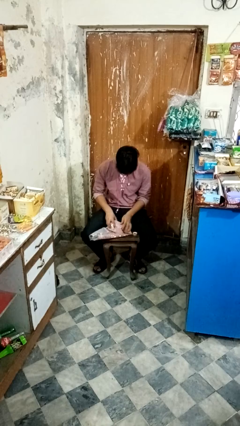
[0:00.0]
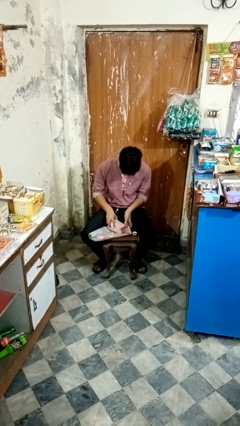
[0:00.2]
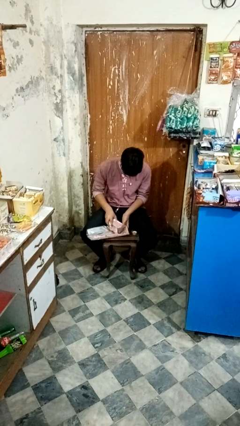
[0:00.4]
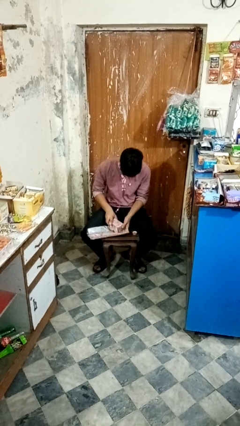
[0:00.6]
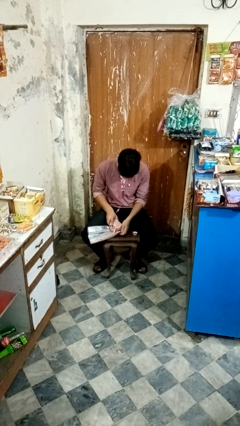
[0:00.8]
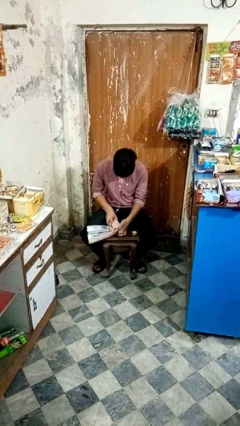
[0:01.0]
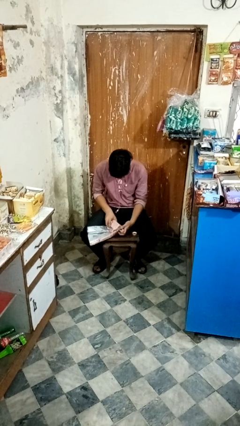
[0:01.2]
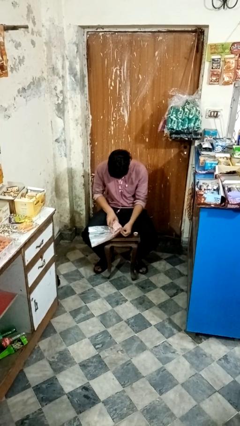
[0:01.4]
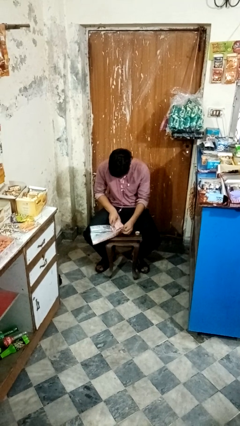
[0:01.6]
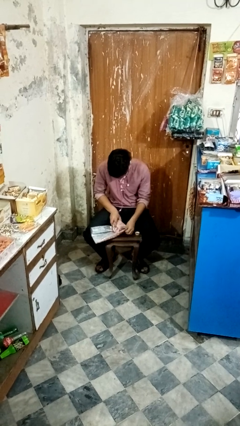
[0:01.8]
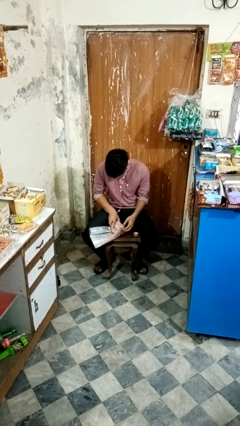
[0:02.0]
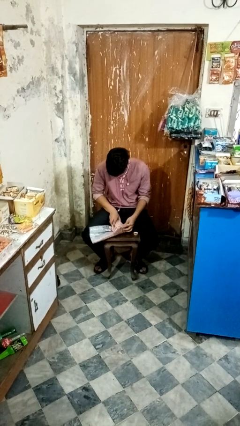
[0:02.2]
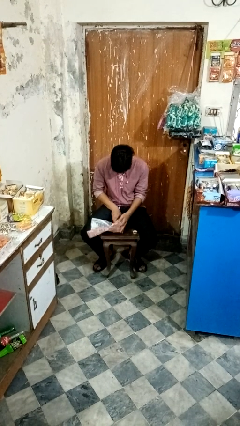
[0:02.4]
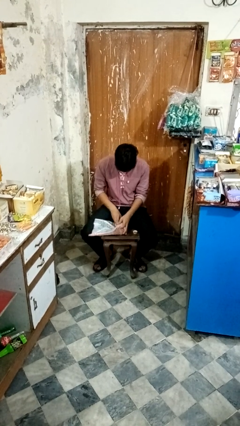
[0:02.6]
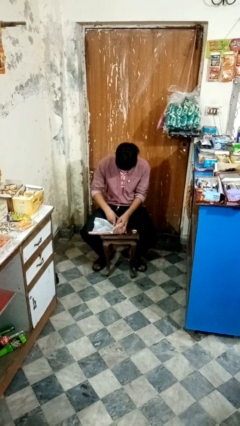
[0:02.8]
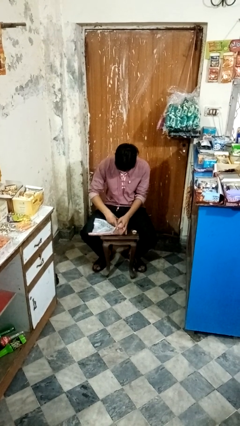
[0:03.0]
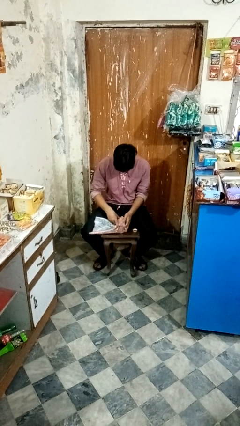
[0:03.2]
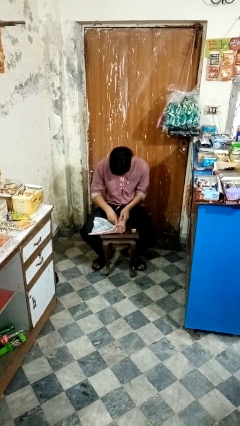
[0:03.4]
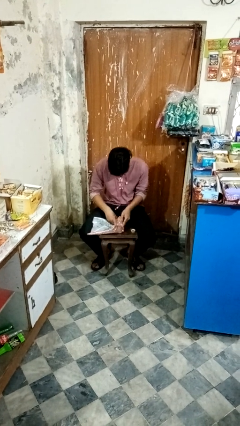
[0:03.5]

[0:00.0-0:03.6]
person wraps box

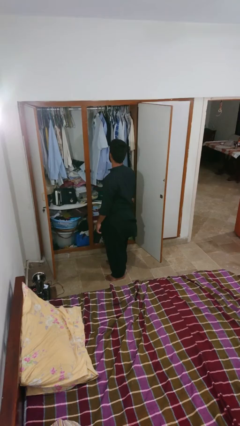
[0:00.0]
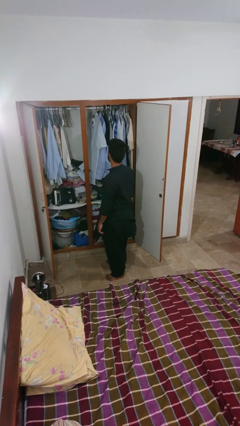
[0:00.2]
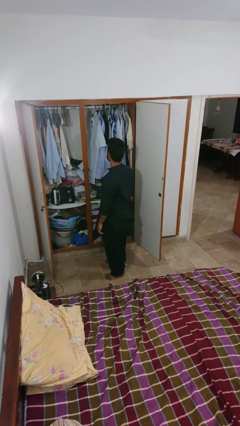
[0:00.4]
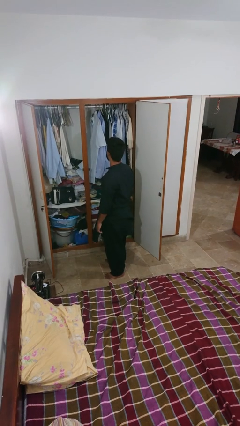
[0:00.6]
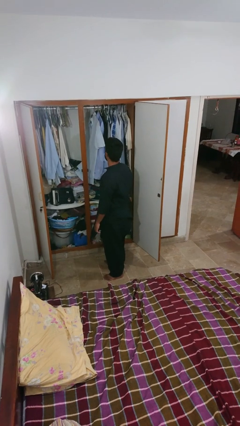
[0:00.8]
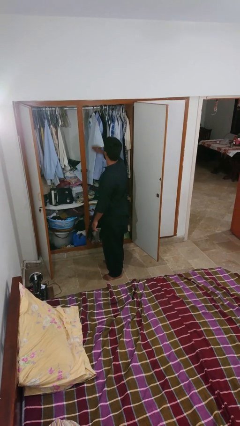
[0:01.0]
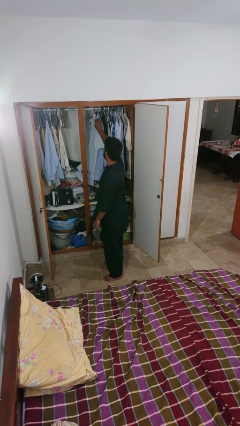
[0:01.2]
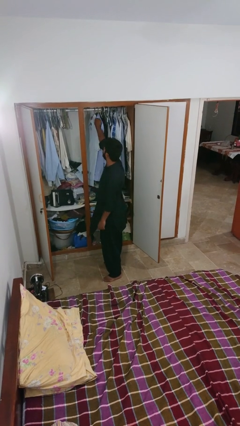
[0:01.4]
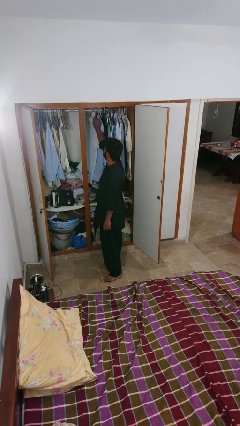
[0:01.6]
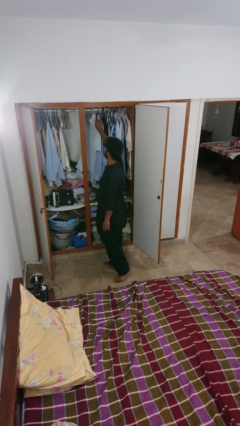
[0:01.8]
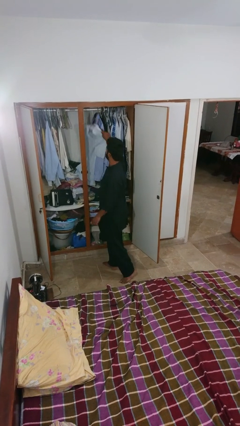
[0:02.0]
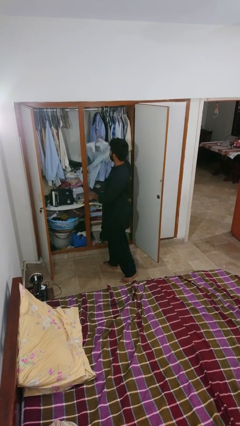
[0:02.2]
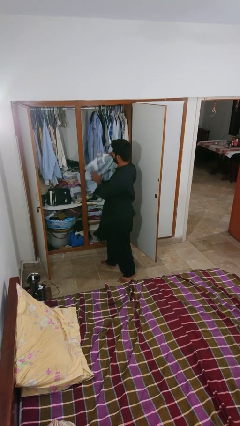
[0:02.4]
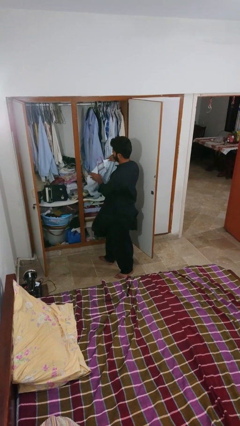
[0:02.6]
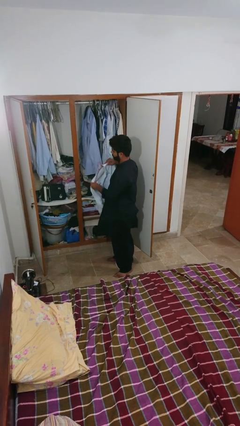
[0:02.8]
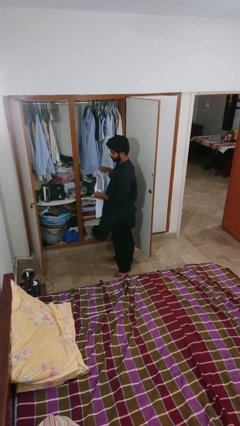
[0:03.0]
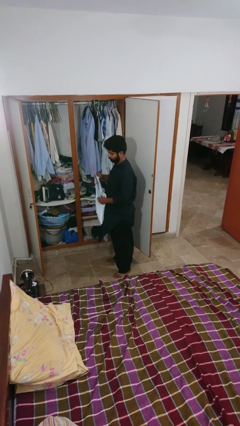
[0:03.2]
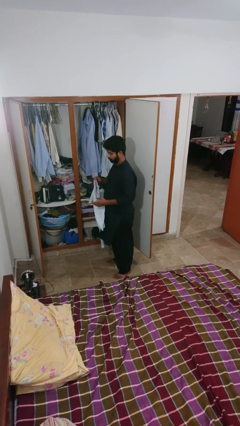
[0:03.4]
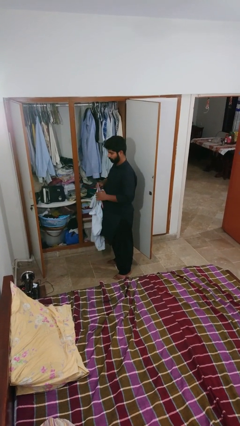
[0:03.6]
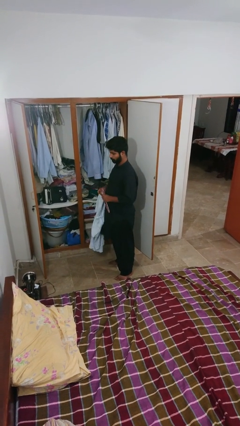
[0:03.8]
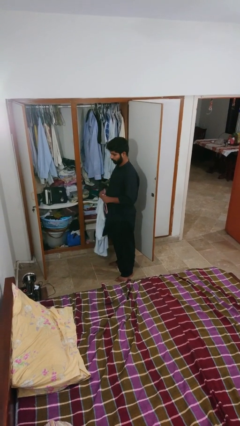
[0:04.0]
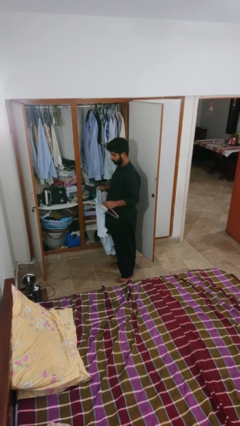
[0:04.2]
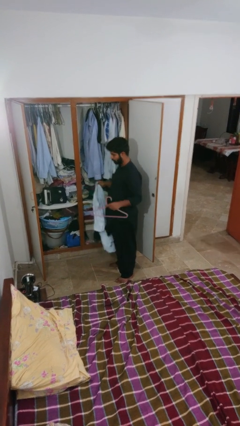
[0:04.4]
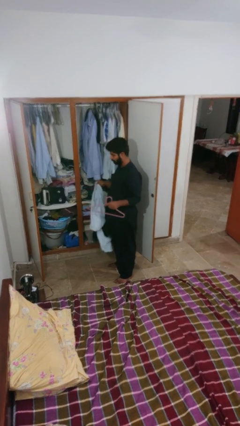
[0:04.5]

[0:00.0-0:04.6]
person takes clothes from closet

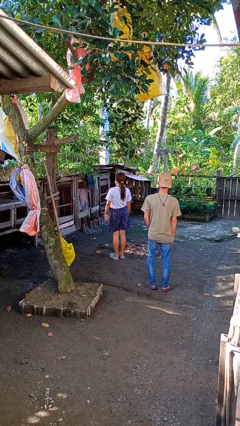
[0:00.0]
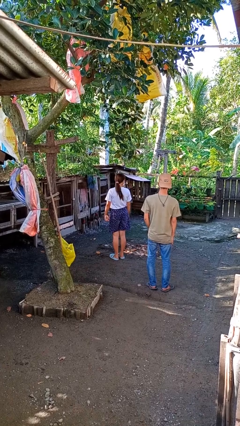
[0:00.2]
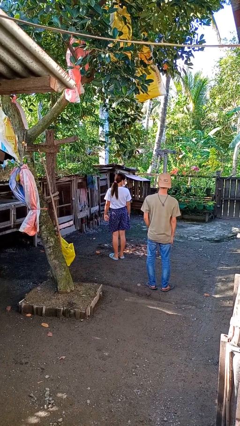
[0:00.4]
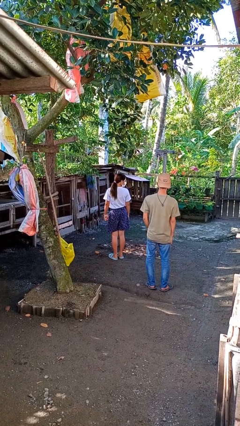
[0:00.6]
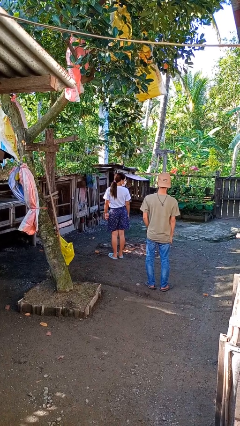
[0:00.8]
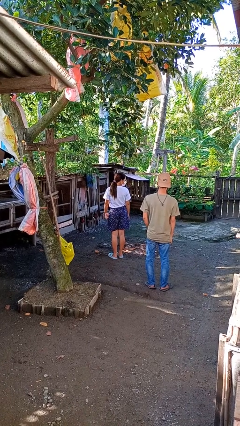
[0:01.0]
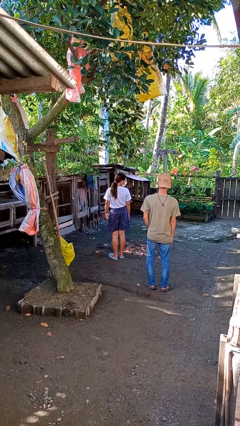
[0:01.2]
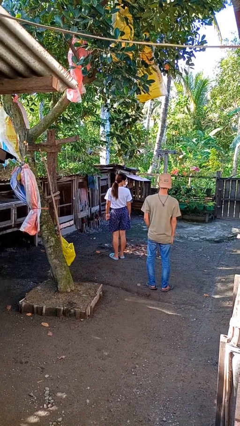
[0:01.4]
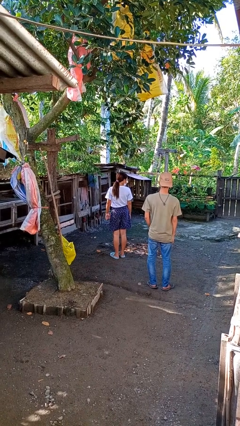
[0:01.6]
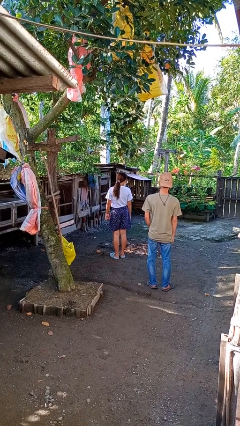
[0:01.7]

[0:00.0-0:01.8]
person looks over shoulder

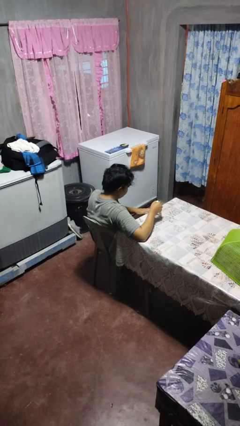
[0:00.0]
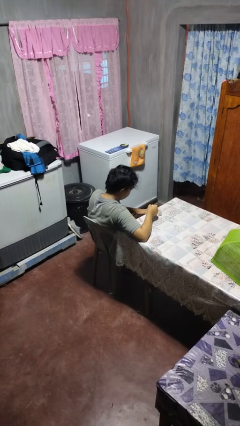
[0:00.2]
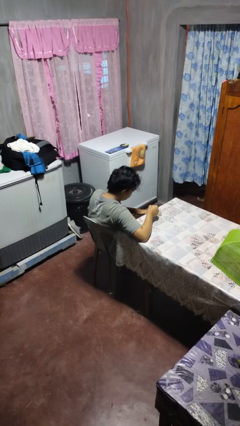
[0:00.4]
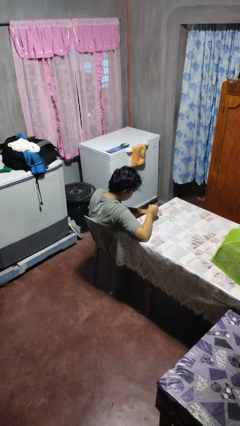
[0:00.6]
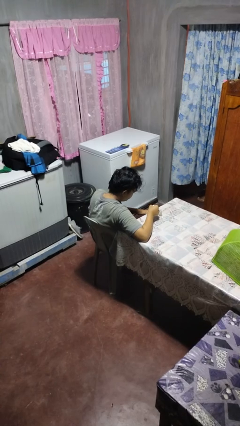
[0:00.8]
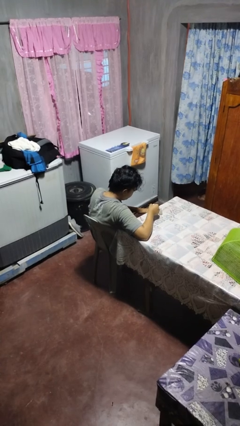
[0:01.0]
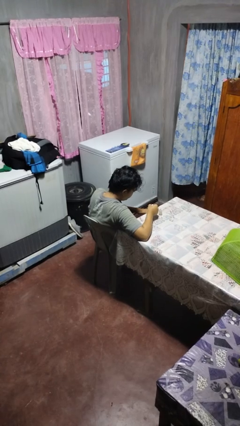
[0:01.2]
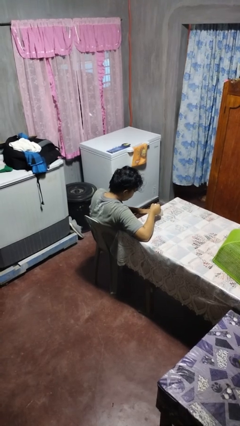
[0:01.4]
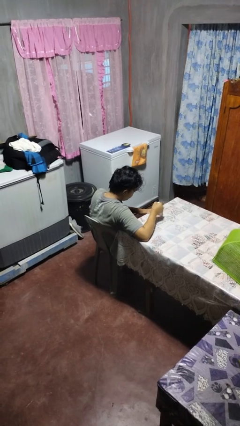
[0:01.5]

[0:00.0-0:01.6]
person paints fingernails

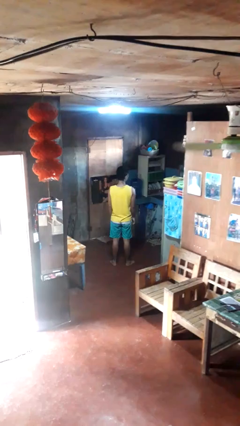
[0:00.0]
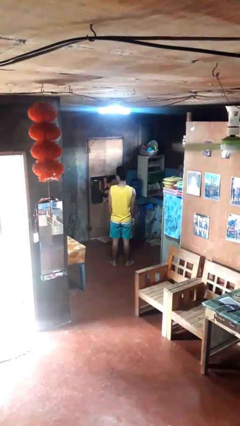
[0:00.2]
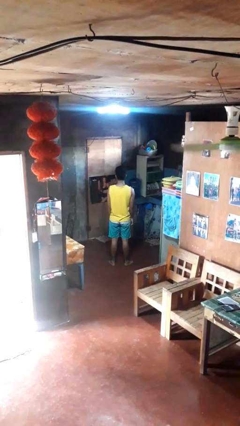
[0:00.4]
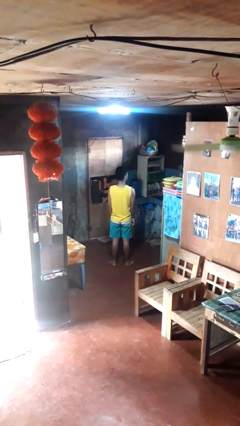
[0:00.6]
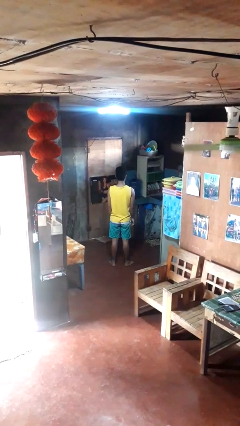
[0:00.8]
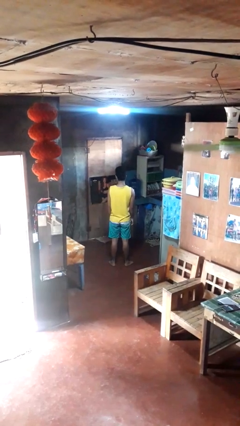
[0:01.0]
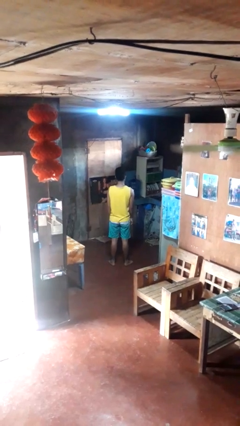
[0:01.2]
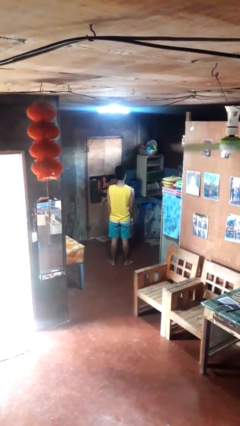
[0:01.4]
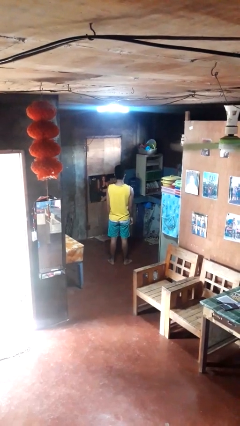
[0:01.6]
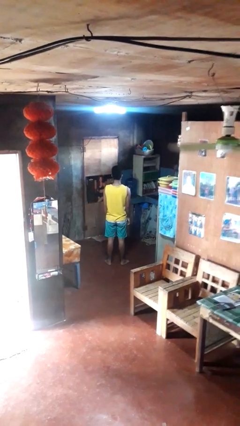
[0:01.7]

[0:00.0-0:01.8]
person shakes head

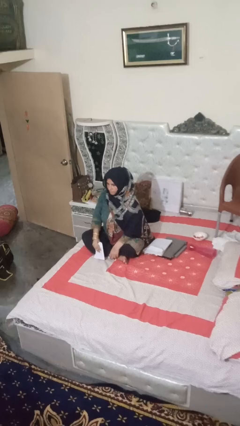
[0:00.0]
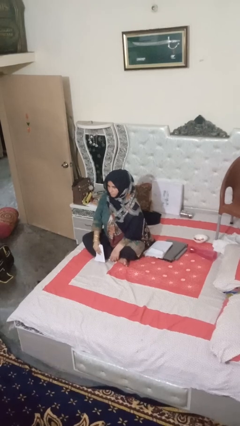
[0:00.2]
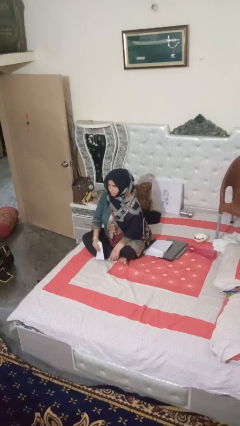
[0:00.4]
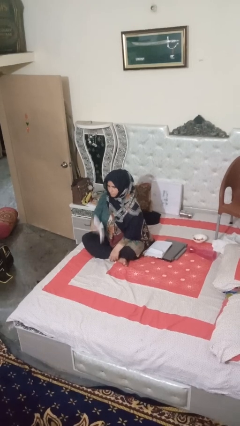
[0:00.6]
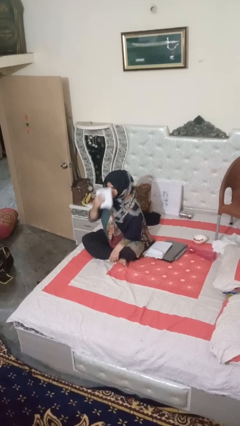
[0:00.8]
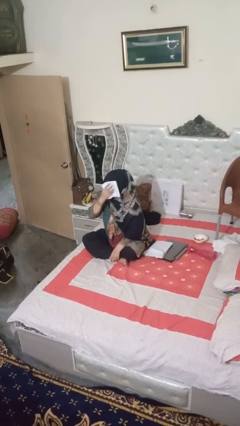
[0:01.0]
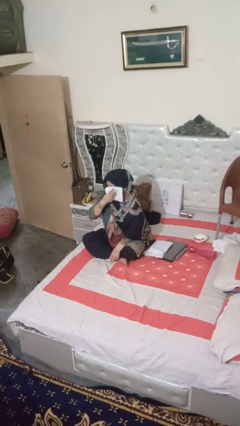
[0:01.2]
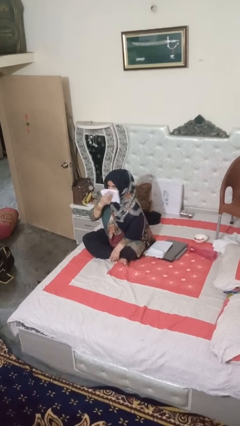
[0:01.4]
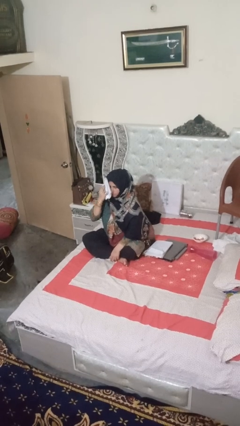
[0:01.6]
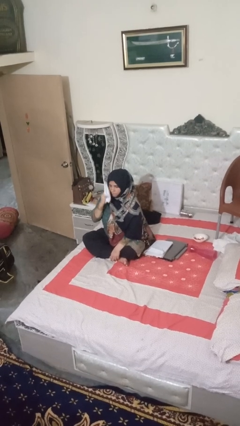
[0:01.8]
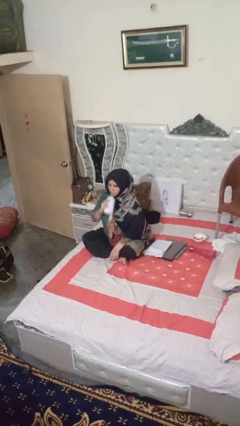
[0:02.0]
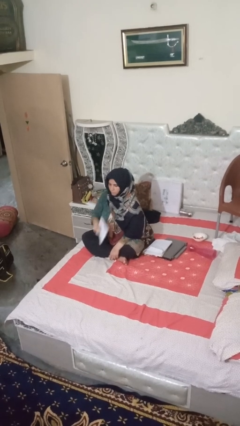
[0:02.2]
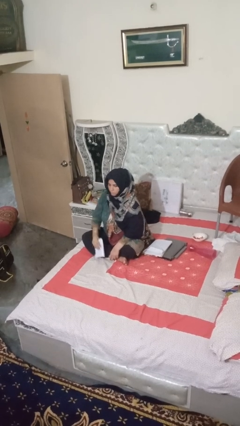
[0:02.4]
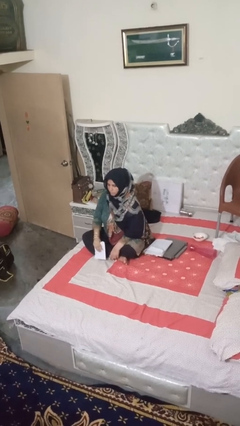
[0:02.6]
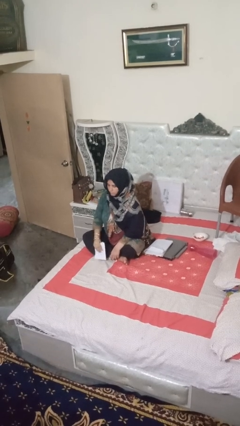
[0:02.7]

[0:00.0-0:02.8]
person wipes mouth with napkin

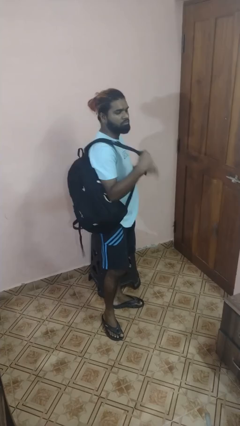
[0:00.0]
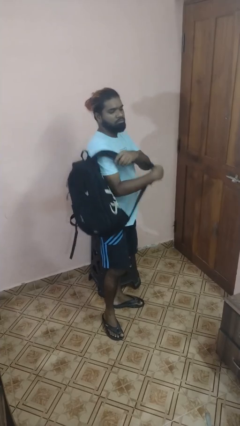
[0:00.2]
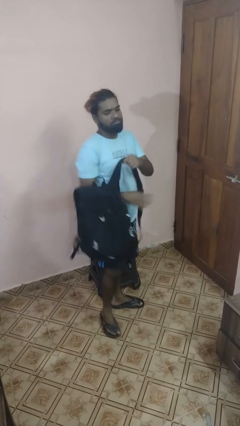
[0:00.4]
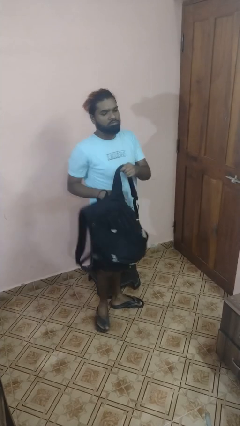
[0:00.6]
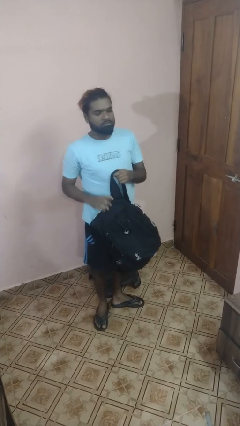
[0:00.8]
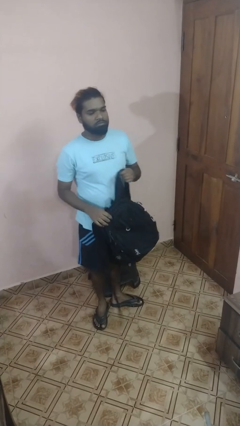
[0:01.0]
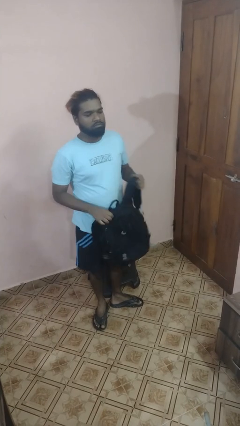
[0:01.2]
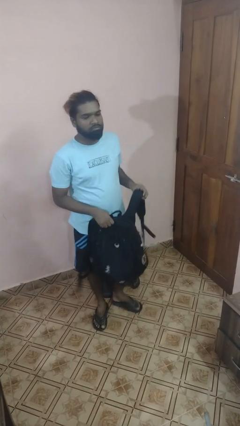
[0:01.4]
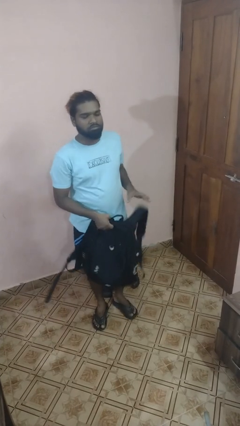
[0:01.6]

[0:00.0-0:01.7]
person takes off backpack
